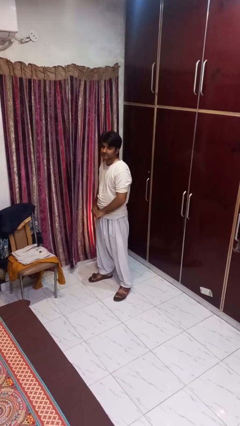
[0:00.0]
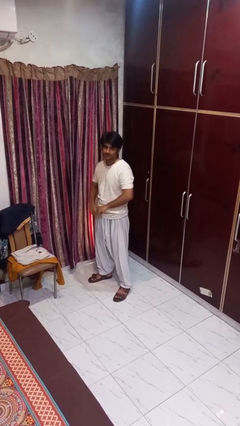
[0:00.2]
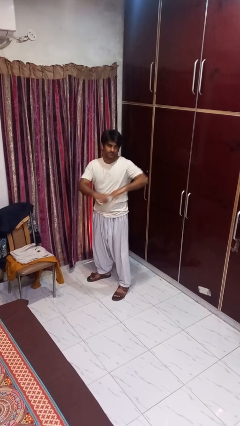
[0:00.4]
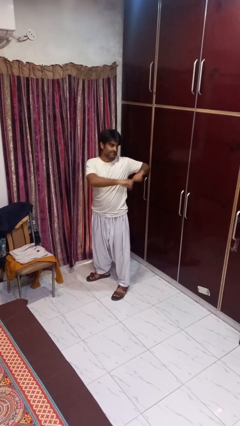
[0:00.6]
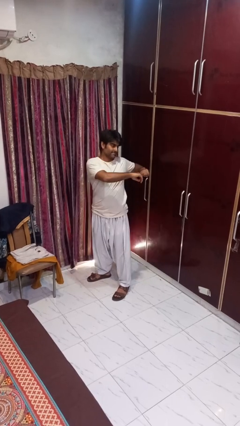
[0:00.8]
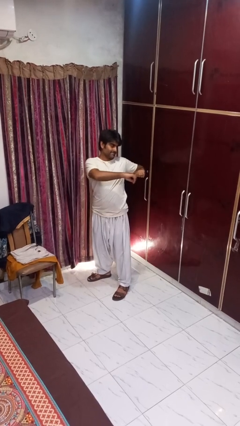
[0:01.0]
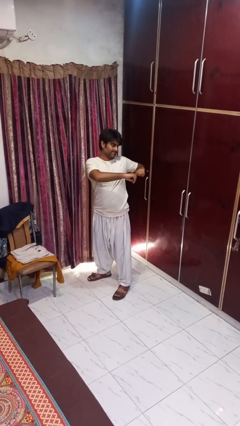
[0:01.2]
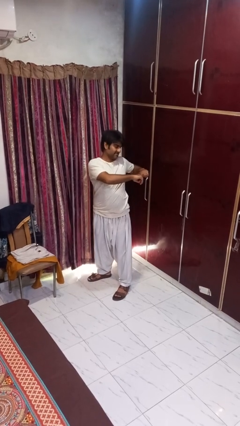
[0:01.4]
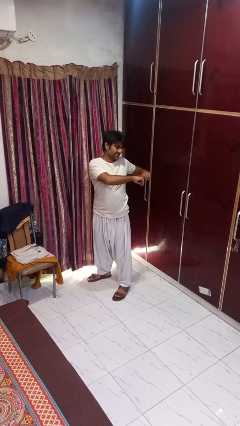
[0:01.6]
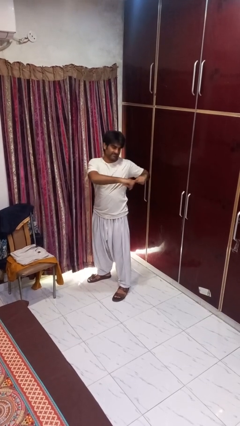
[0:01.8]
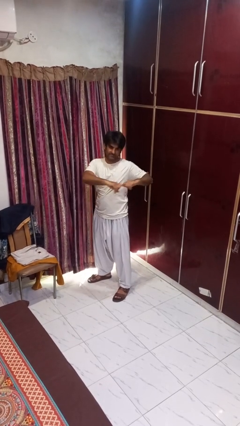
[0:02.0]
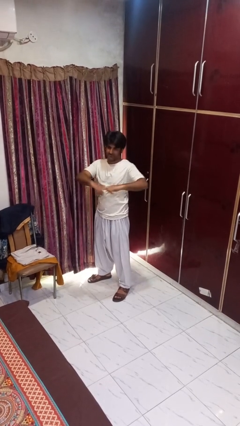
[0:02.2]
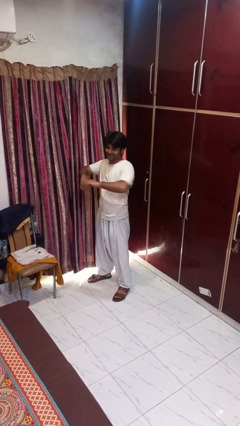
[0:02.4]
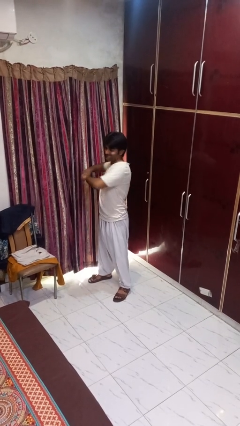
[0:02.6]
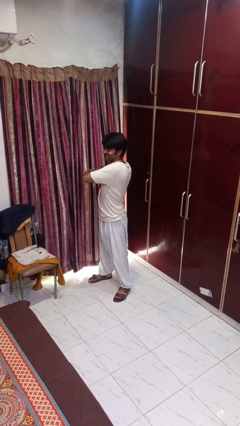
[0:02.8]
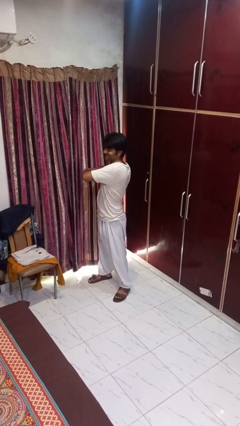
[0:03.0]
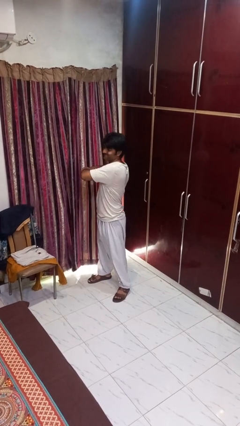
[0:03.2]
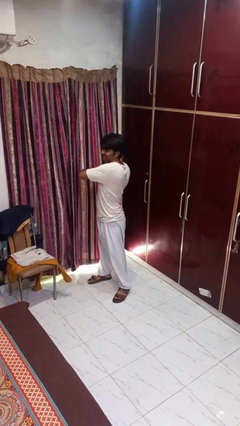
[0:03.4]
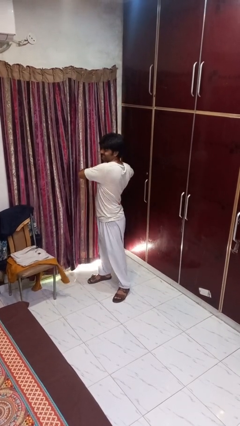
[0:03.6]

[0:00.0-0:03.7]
person stretches arms to side

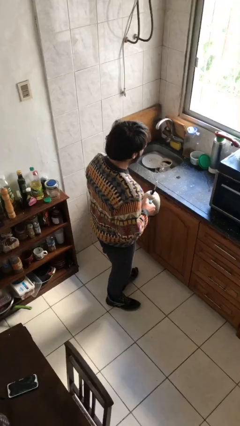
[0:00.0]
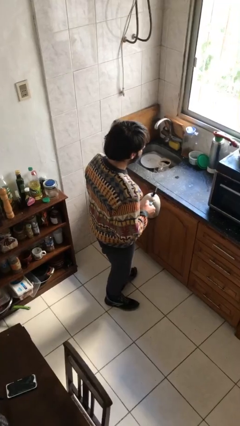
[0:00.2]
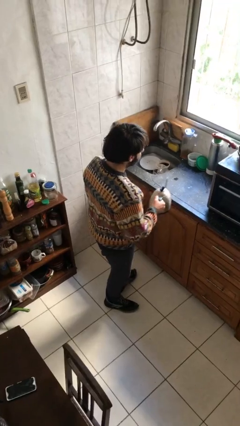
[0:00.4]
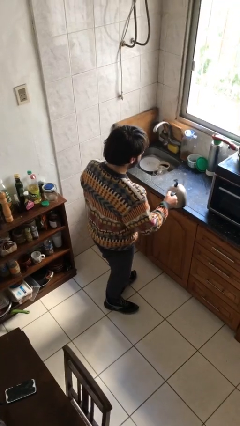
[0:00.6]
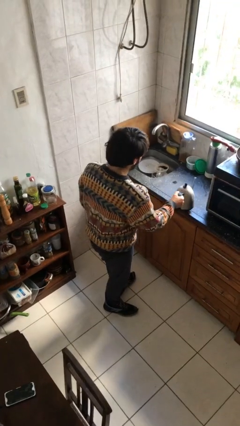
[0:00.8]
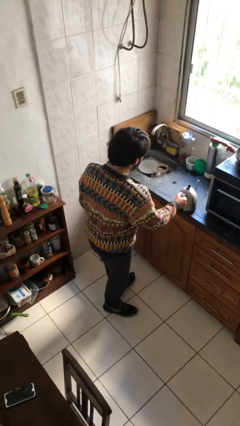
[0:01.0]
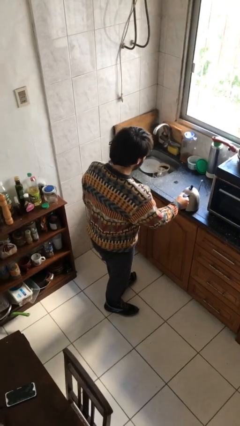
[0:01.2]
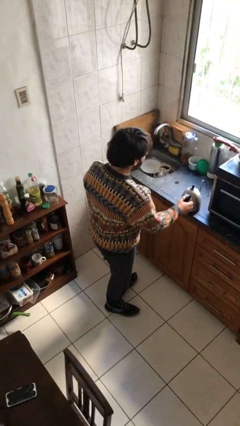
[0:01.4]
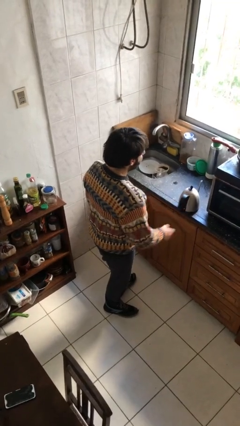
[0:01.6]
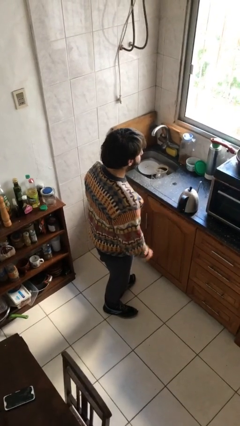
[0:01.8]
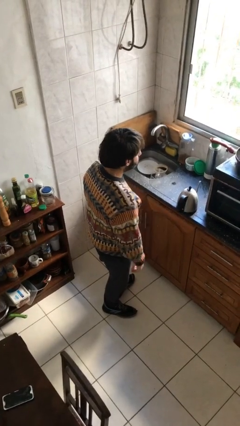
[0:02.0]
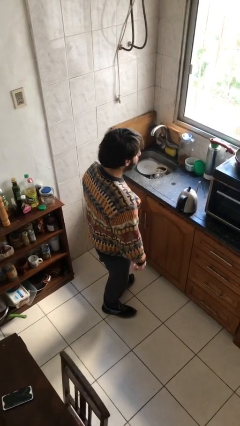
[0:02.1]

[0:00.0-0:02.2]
person puts down object on countertop

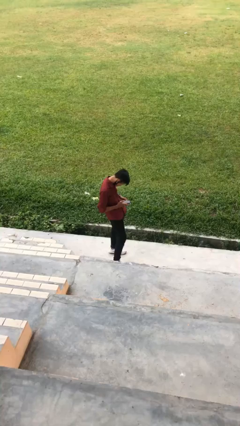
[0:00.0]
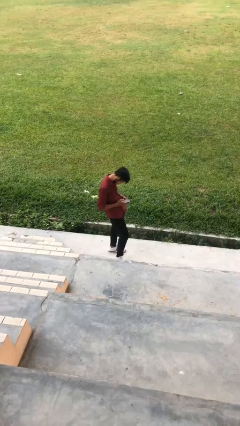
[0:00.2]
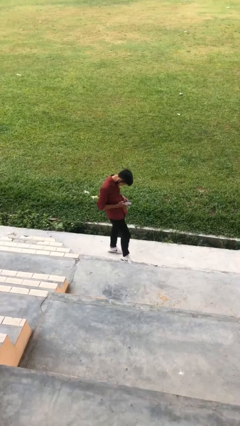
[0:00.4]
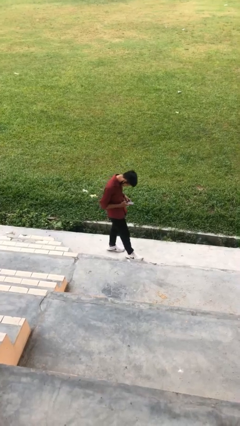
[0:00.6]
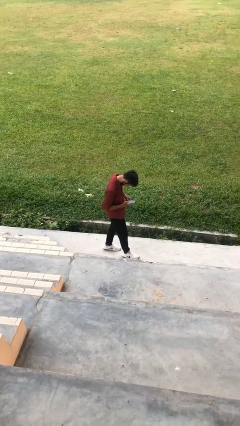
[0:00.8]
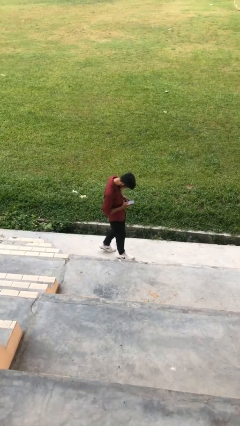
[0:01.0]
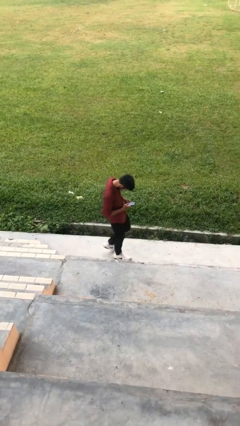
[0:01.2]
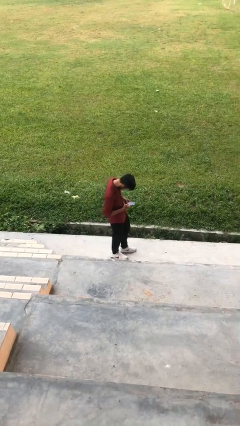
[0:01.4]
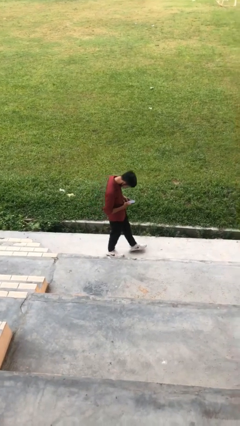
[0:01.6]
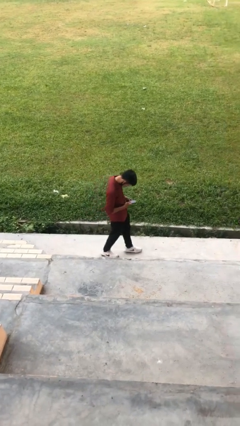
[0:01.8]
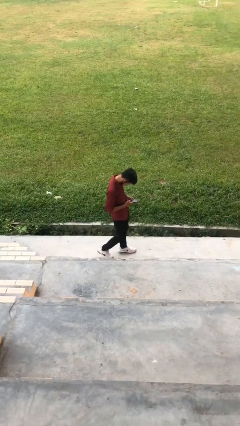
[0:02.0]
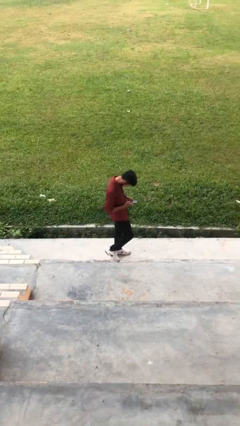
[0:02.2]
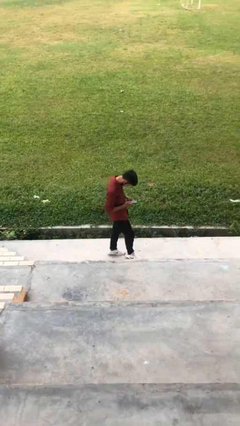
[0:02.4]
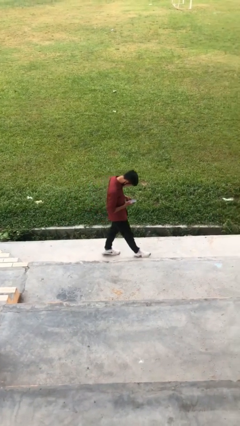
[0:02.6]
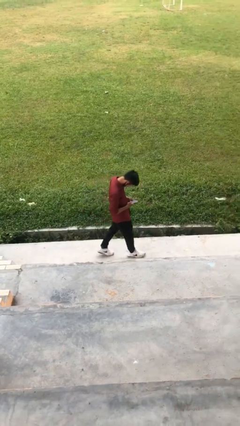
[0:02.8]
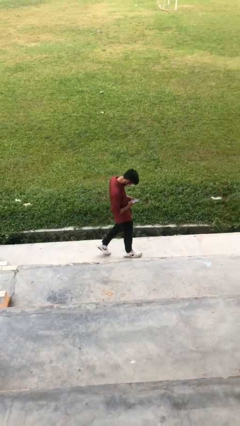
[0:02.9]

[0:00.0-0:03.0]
person texts on phone

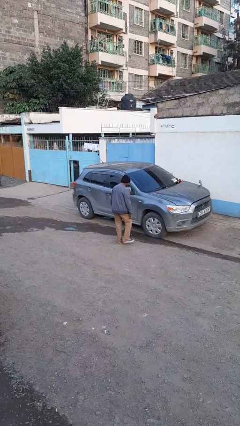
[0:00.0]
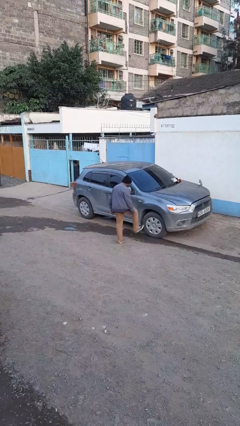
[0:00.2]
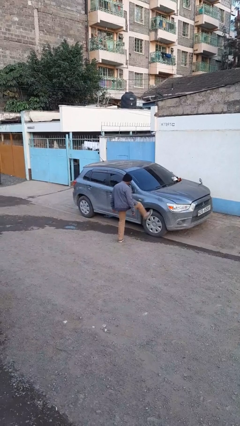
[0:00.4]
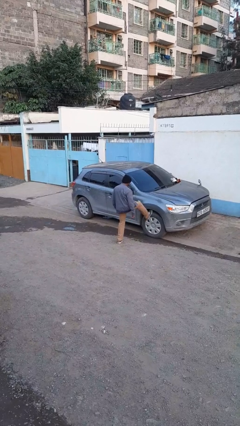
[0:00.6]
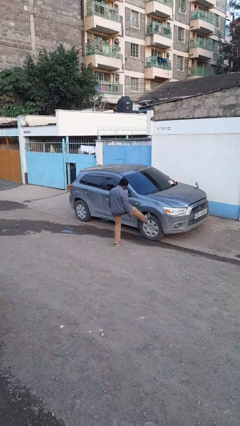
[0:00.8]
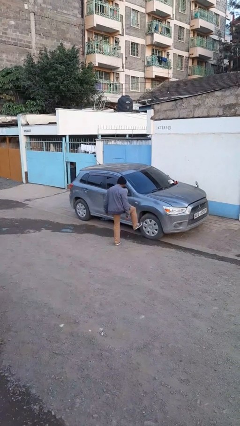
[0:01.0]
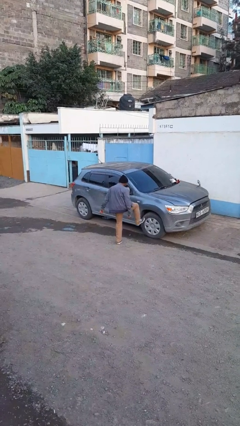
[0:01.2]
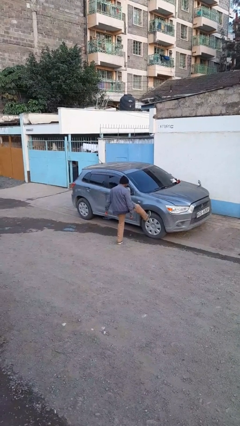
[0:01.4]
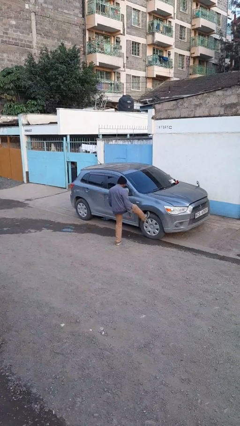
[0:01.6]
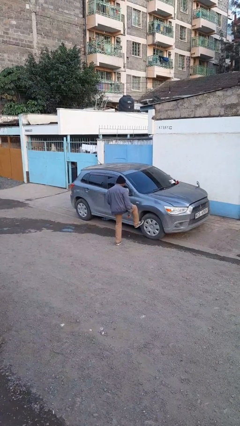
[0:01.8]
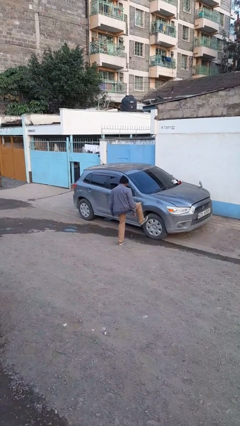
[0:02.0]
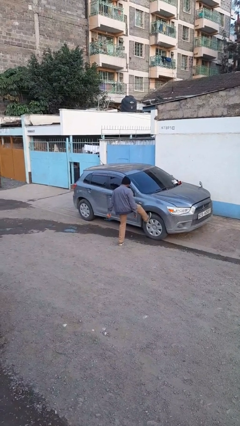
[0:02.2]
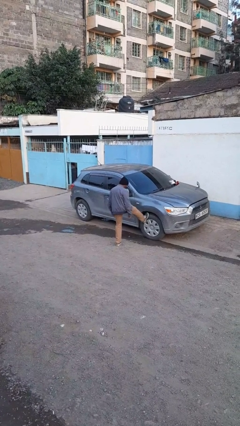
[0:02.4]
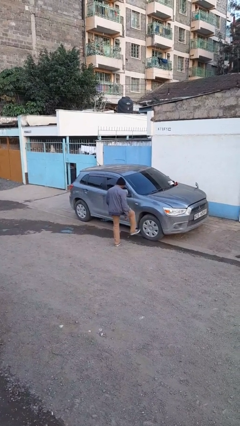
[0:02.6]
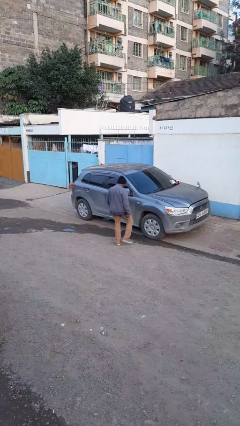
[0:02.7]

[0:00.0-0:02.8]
person kicks car tires

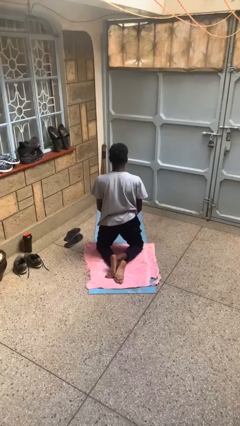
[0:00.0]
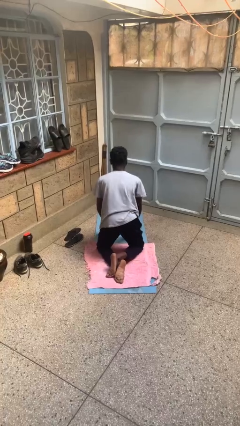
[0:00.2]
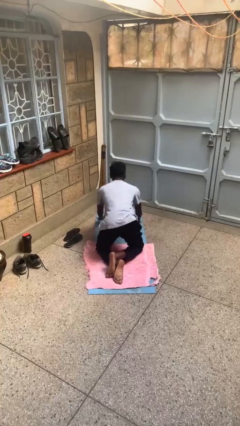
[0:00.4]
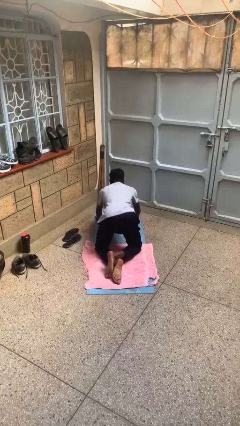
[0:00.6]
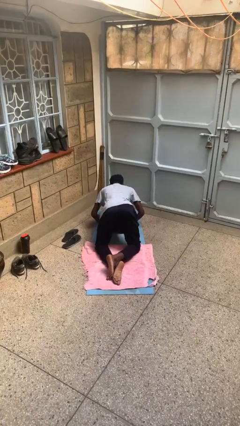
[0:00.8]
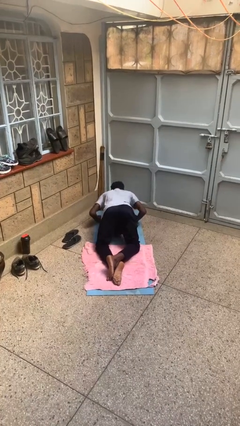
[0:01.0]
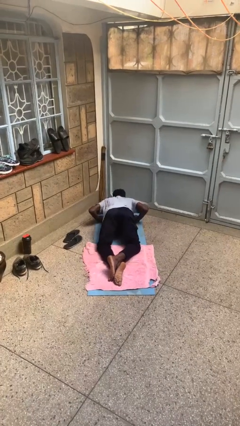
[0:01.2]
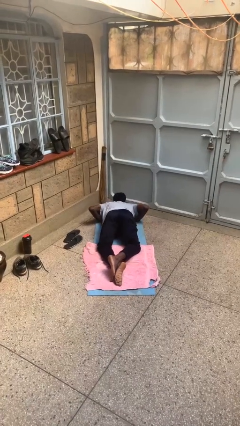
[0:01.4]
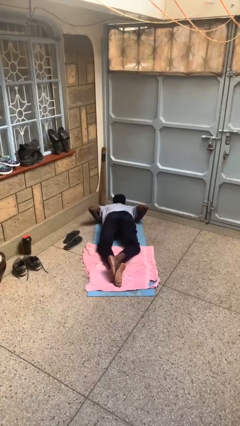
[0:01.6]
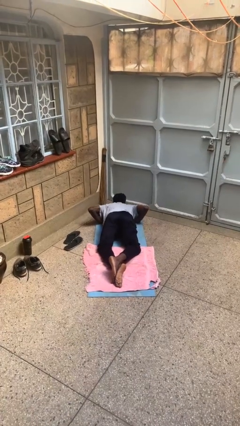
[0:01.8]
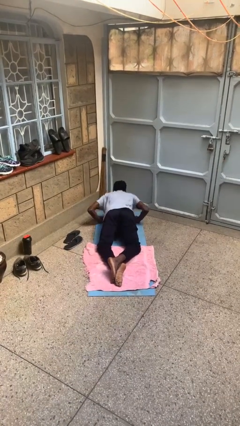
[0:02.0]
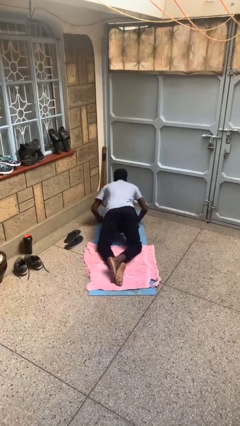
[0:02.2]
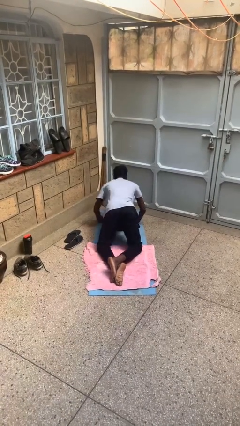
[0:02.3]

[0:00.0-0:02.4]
person exercises with pushup

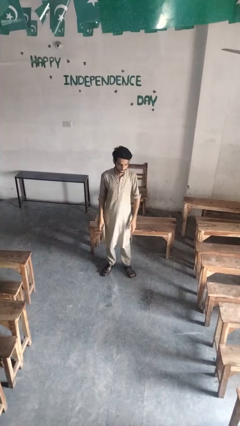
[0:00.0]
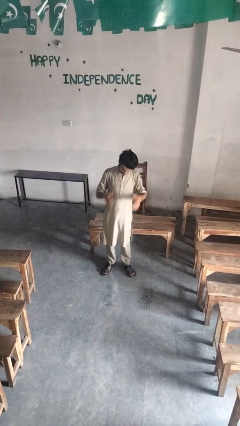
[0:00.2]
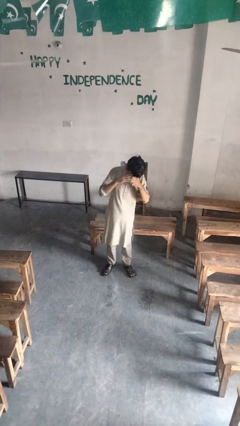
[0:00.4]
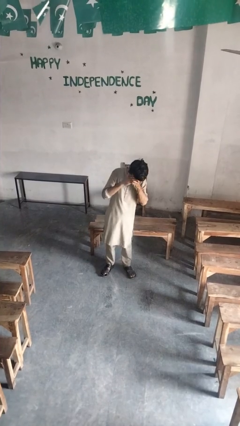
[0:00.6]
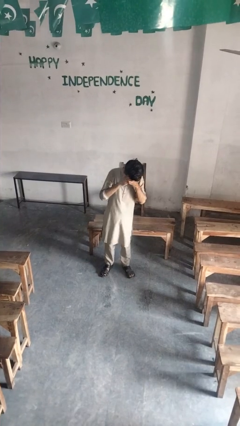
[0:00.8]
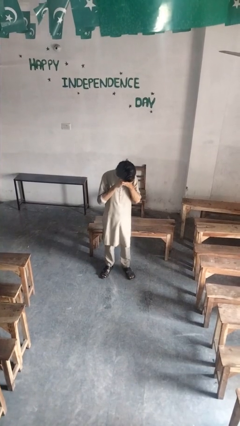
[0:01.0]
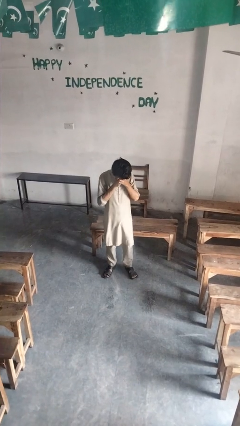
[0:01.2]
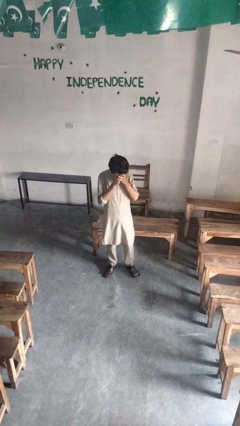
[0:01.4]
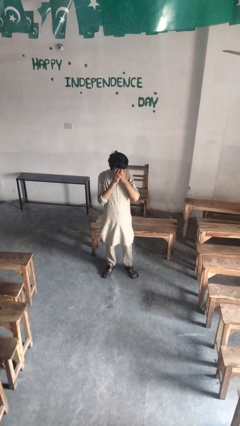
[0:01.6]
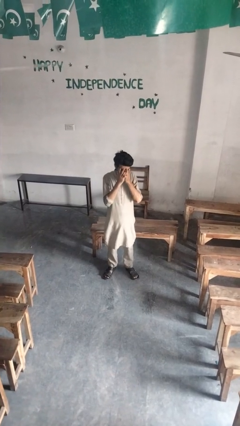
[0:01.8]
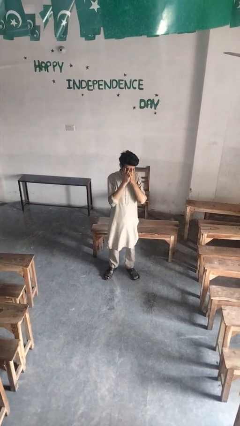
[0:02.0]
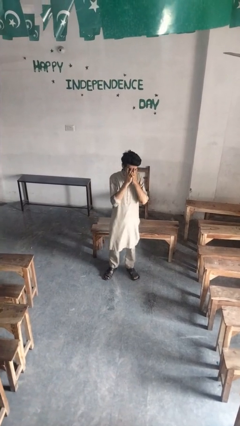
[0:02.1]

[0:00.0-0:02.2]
person covers face with hands

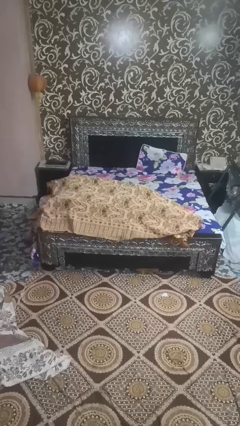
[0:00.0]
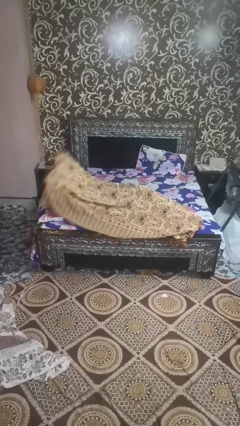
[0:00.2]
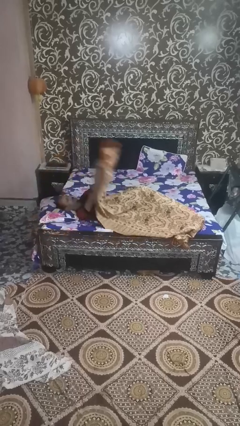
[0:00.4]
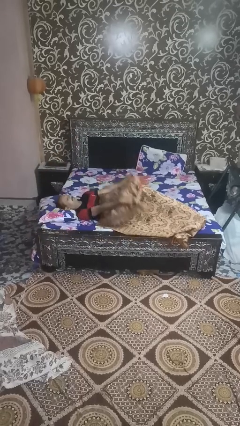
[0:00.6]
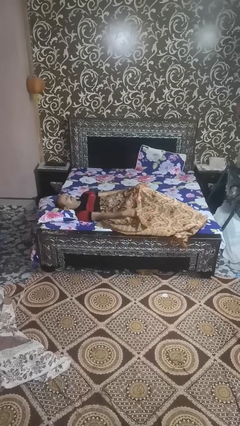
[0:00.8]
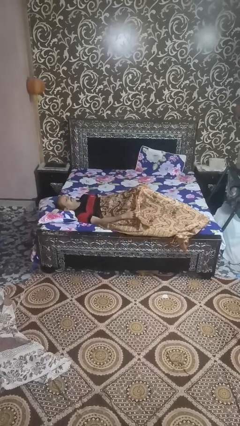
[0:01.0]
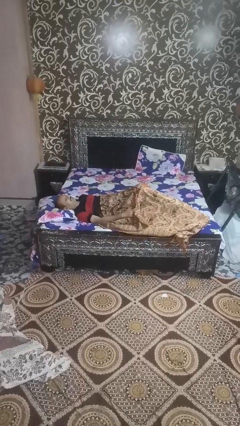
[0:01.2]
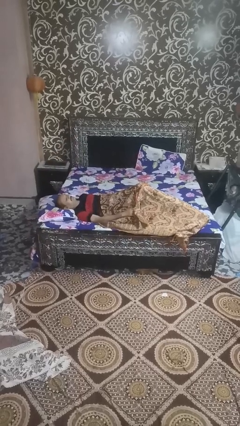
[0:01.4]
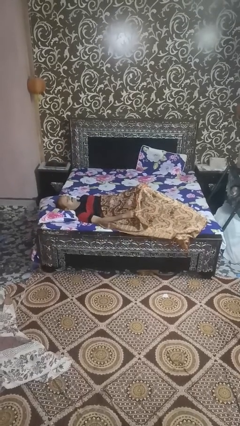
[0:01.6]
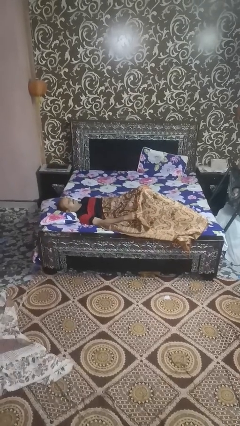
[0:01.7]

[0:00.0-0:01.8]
person uncovers with blanket
